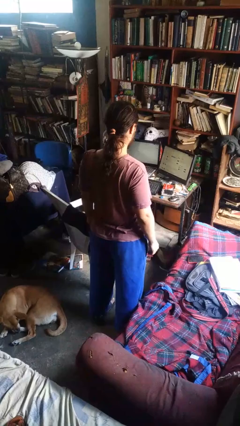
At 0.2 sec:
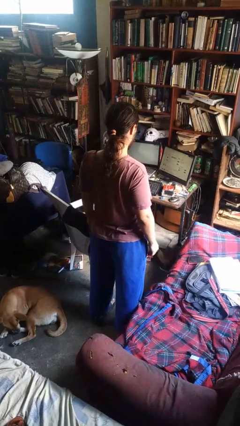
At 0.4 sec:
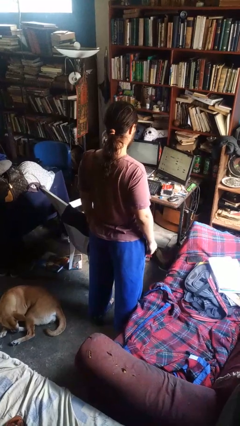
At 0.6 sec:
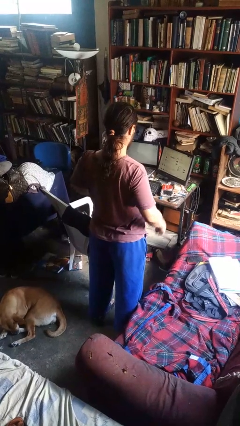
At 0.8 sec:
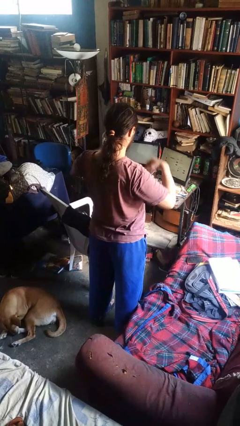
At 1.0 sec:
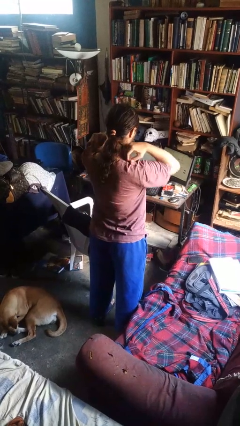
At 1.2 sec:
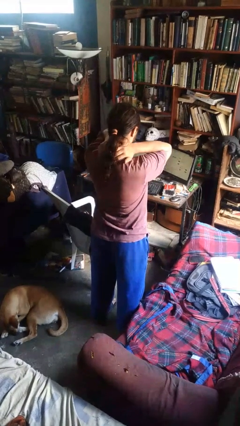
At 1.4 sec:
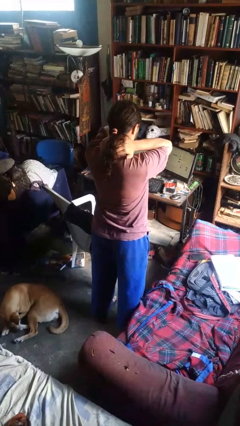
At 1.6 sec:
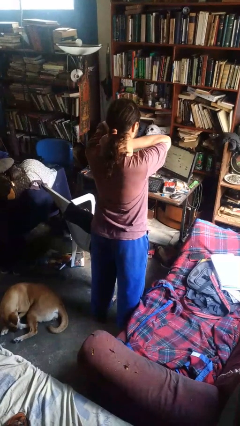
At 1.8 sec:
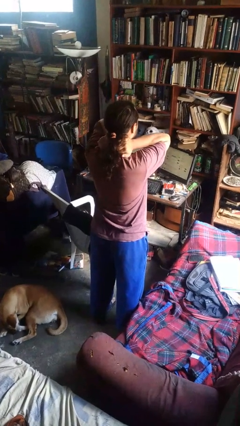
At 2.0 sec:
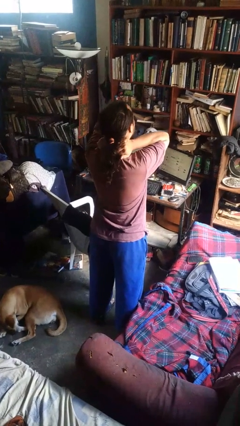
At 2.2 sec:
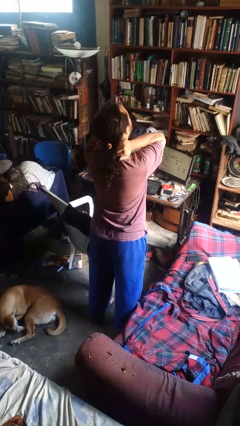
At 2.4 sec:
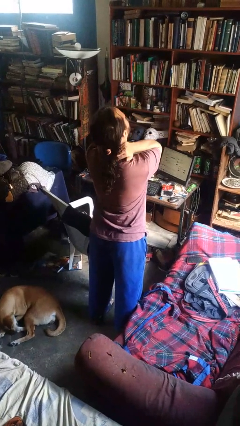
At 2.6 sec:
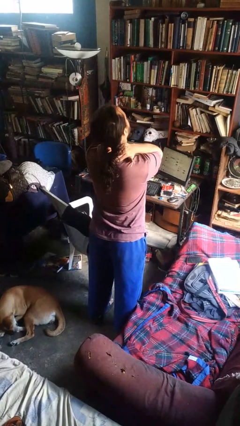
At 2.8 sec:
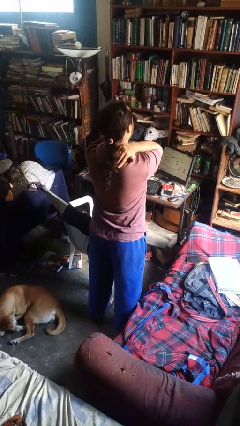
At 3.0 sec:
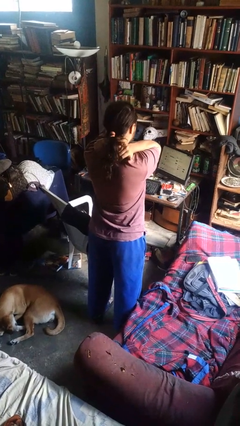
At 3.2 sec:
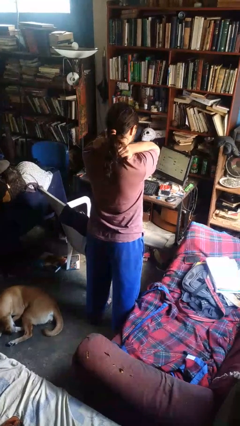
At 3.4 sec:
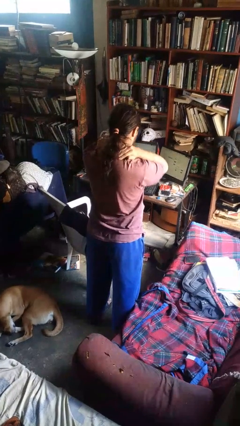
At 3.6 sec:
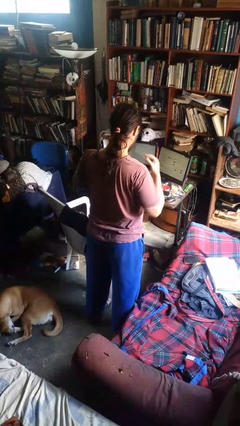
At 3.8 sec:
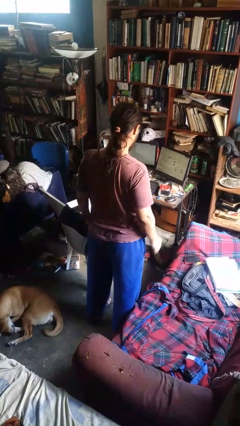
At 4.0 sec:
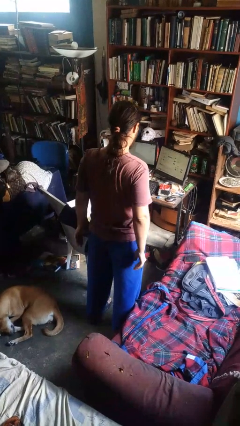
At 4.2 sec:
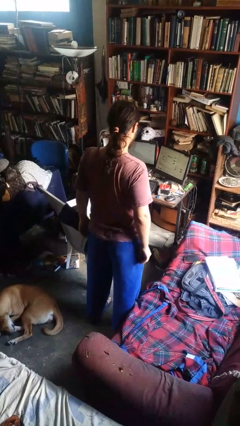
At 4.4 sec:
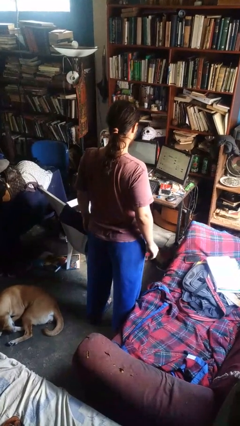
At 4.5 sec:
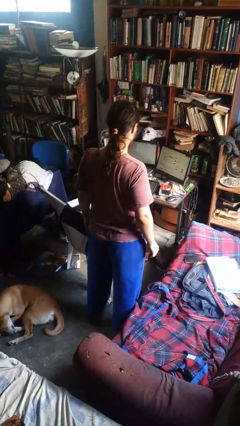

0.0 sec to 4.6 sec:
person rubs neck

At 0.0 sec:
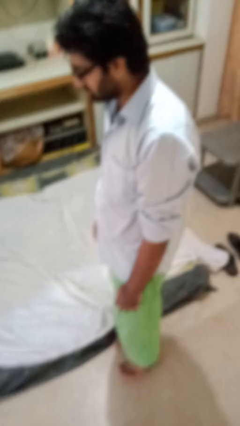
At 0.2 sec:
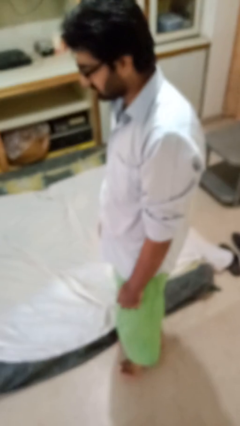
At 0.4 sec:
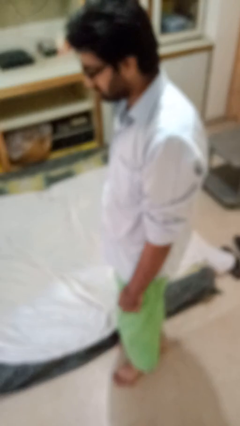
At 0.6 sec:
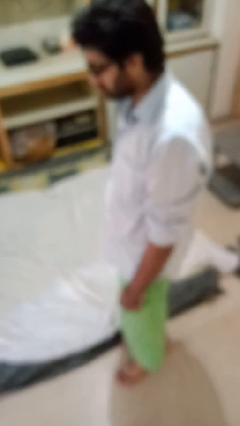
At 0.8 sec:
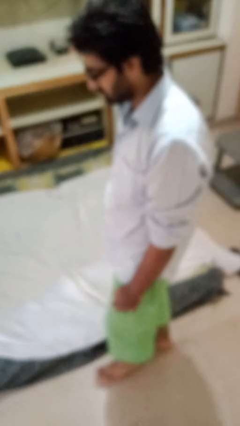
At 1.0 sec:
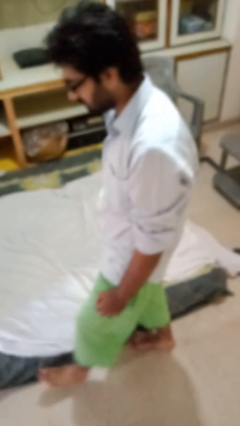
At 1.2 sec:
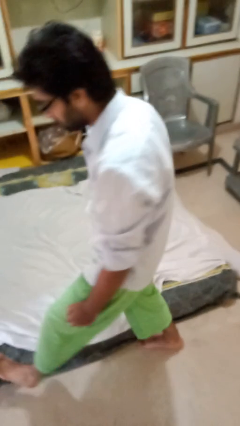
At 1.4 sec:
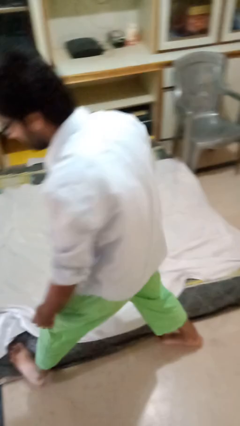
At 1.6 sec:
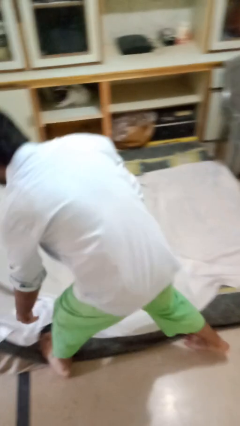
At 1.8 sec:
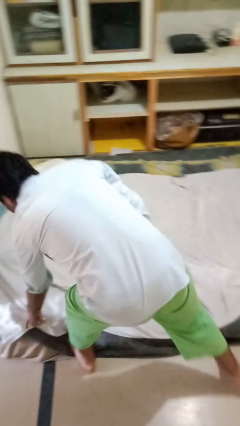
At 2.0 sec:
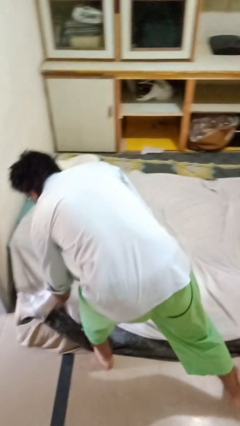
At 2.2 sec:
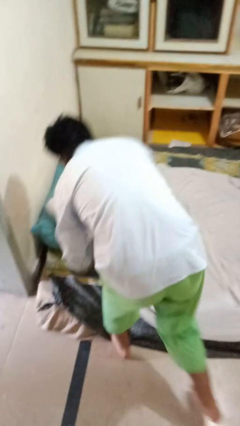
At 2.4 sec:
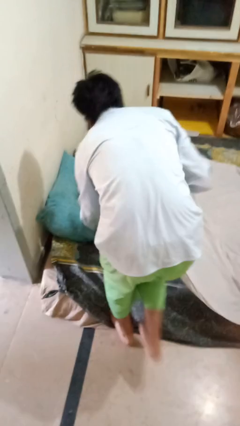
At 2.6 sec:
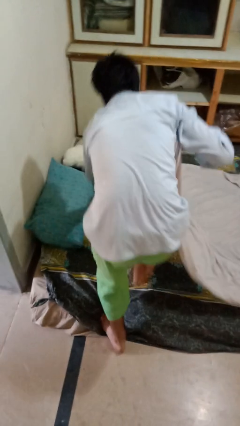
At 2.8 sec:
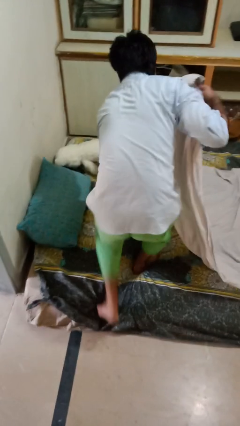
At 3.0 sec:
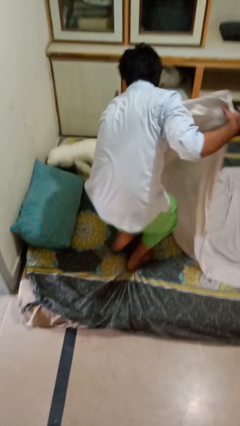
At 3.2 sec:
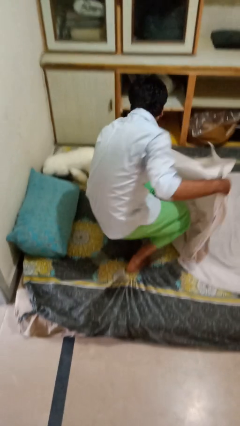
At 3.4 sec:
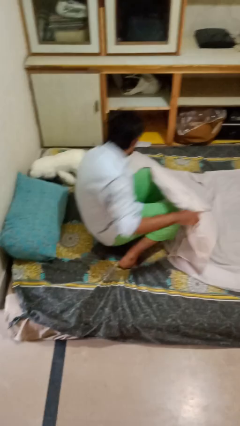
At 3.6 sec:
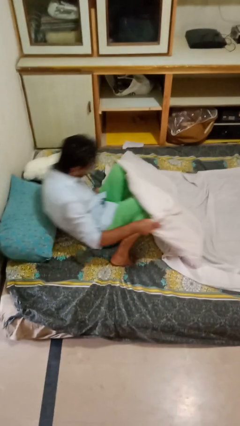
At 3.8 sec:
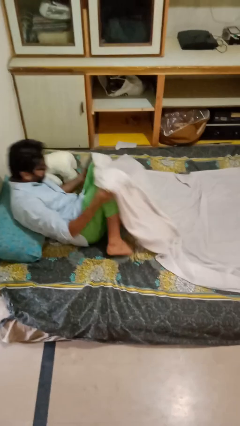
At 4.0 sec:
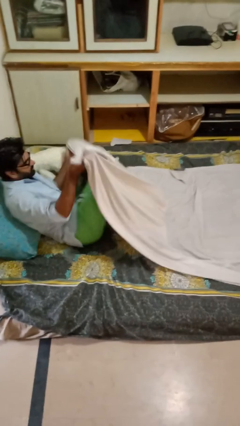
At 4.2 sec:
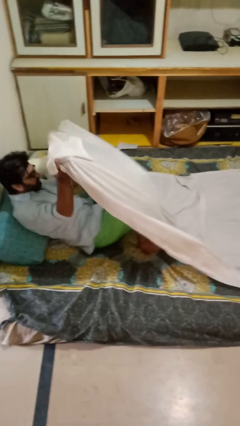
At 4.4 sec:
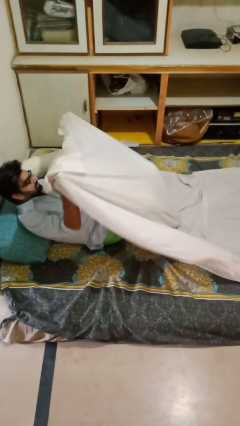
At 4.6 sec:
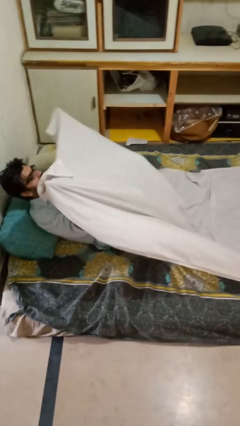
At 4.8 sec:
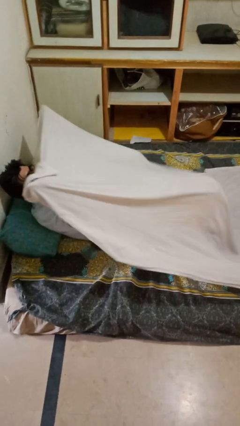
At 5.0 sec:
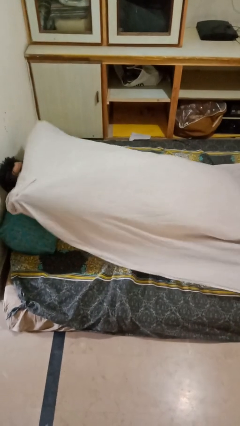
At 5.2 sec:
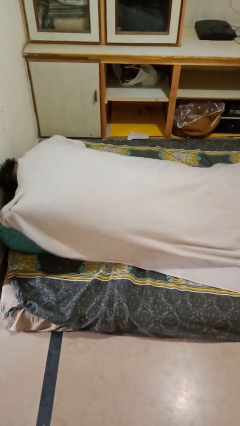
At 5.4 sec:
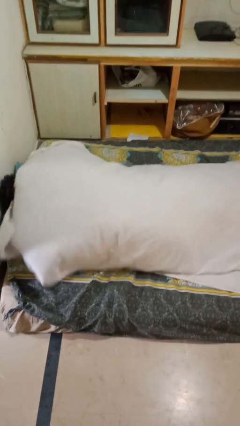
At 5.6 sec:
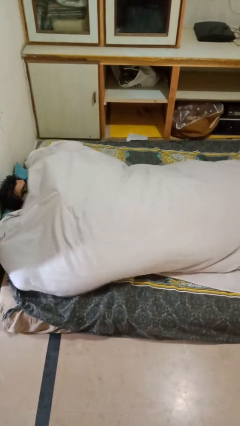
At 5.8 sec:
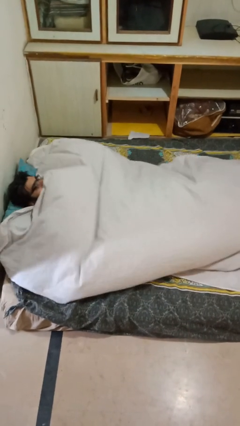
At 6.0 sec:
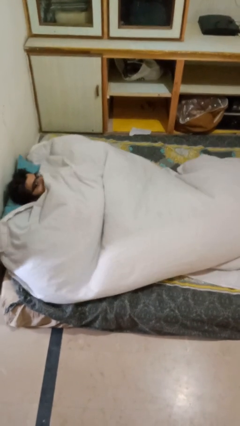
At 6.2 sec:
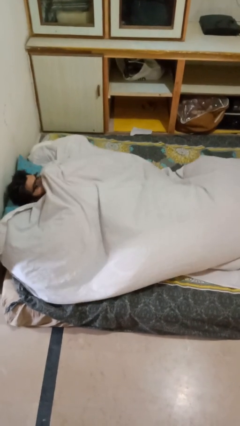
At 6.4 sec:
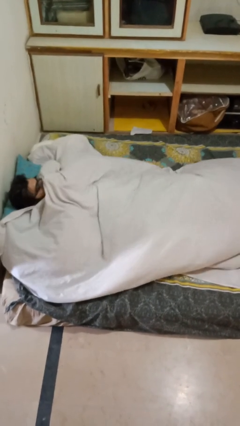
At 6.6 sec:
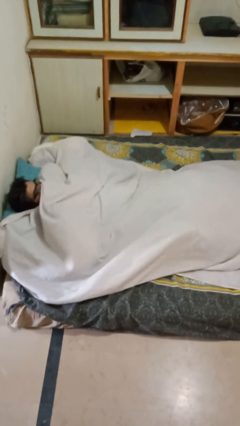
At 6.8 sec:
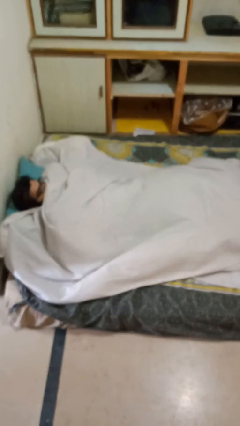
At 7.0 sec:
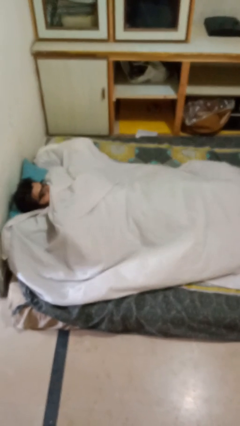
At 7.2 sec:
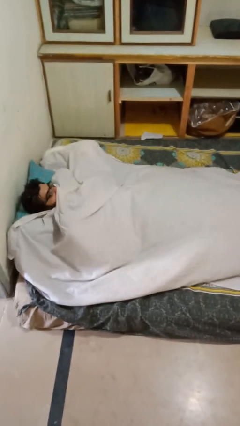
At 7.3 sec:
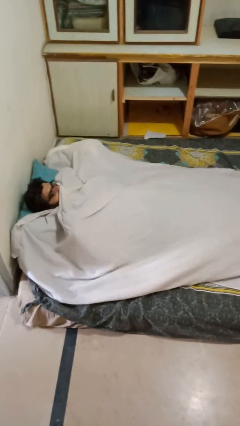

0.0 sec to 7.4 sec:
person covers with bedsheets

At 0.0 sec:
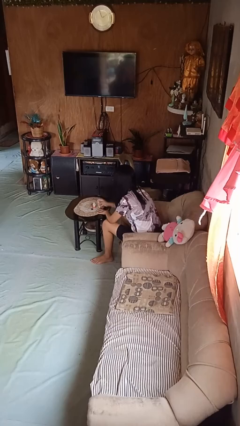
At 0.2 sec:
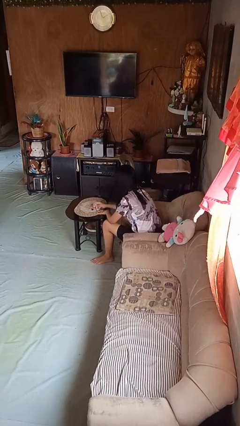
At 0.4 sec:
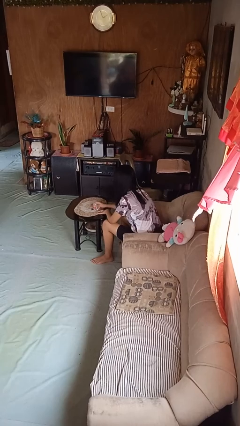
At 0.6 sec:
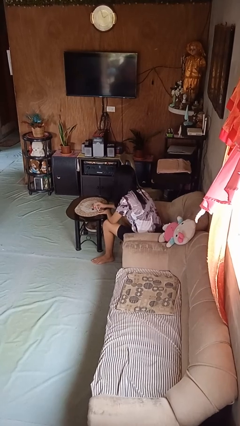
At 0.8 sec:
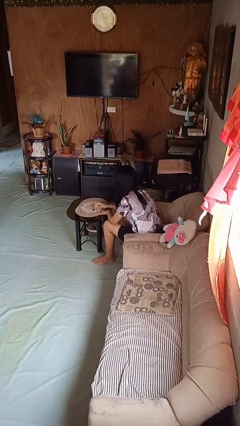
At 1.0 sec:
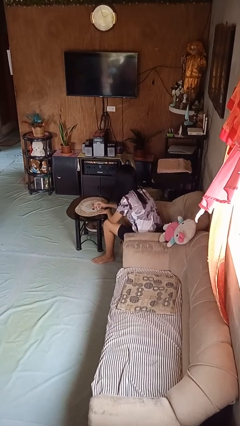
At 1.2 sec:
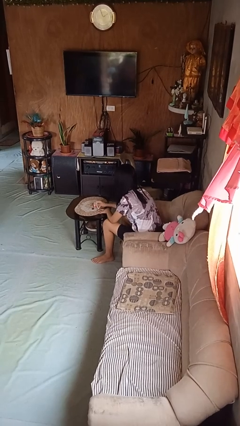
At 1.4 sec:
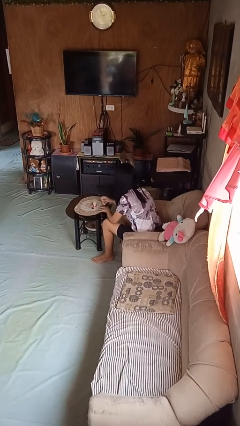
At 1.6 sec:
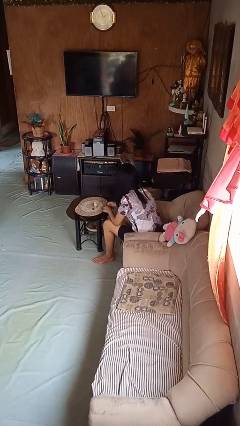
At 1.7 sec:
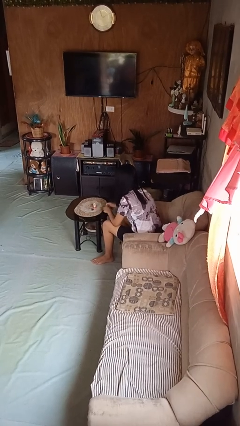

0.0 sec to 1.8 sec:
person paints fingernails

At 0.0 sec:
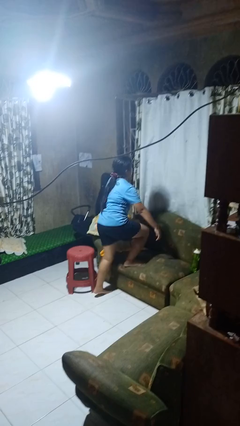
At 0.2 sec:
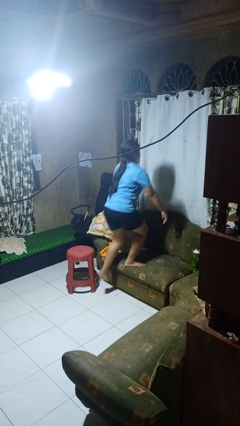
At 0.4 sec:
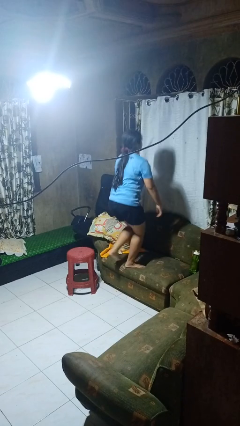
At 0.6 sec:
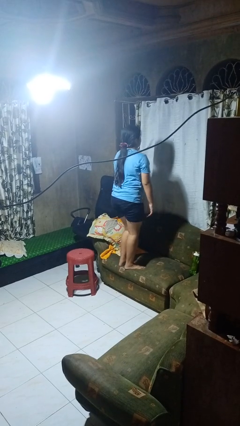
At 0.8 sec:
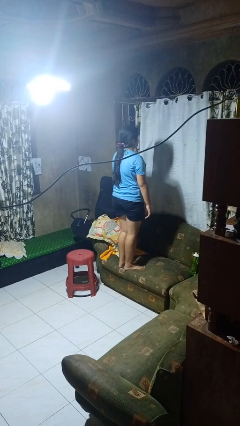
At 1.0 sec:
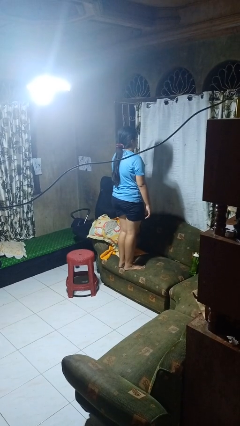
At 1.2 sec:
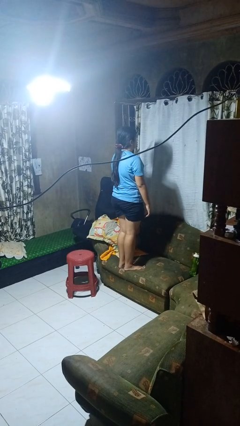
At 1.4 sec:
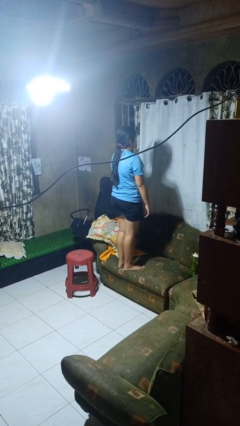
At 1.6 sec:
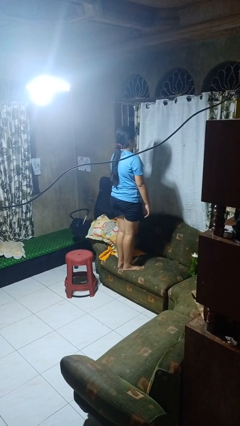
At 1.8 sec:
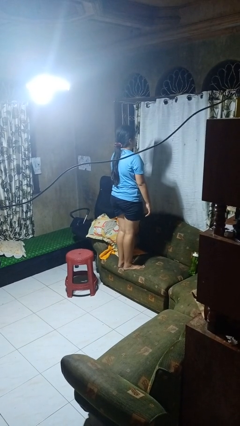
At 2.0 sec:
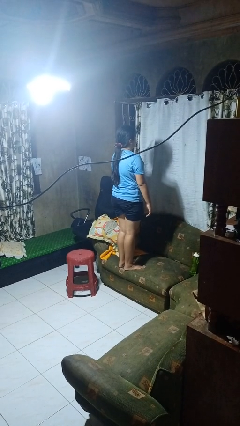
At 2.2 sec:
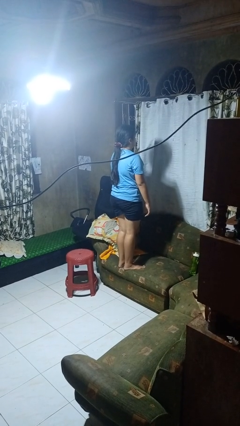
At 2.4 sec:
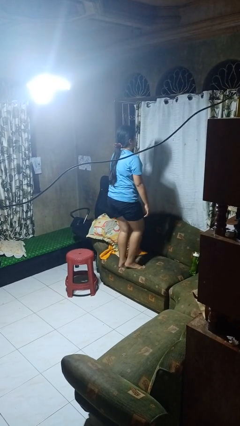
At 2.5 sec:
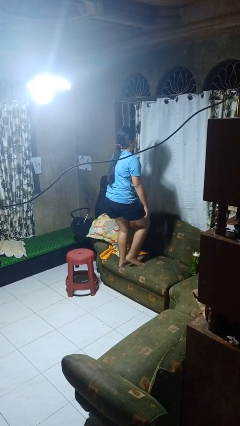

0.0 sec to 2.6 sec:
person climbs on couch

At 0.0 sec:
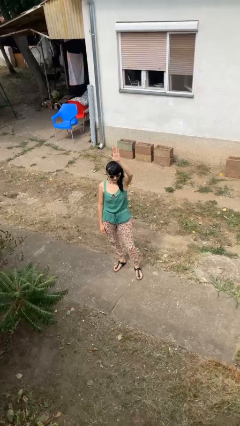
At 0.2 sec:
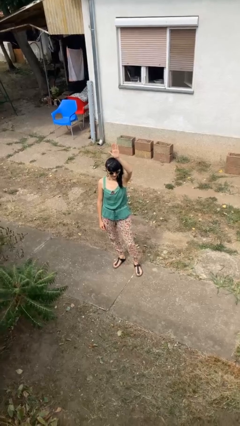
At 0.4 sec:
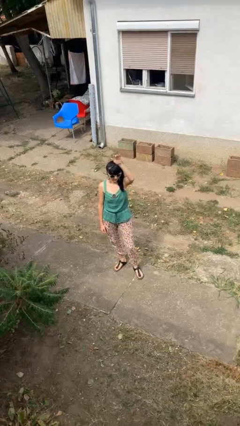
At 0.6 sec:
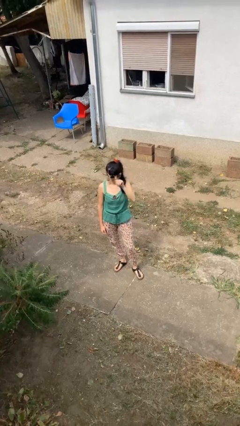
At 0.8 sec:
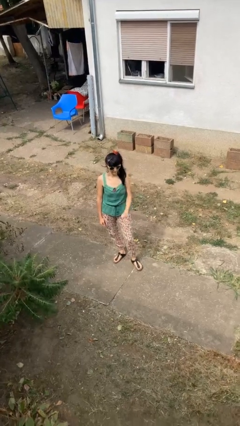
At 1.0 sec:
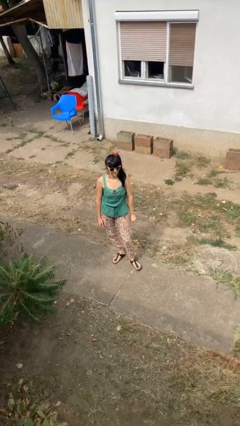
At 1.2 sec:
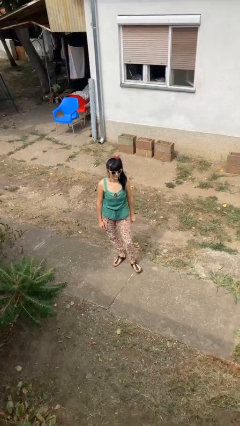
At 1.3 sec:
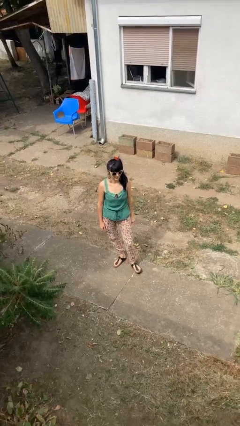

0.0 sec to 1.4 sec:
person gestures lower hand
